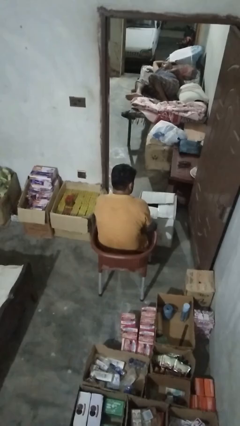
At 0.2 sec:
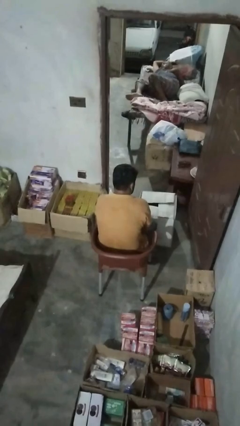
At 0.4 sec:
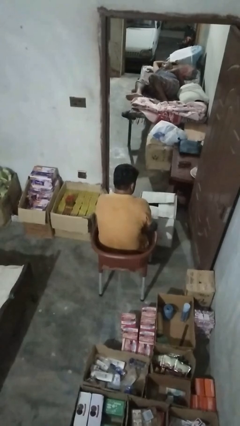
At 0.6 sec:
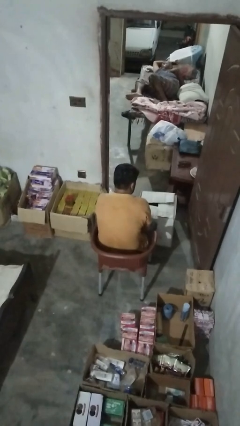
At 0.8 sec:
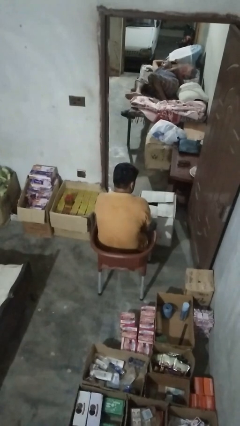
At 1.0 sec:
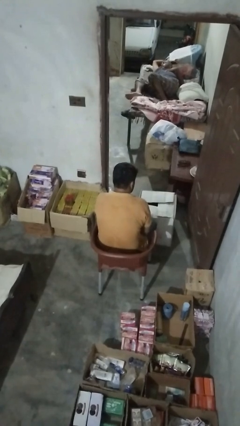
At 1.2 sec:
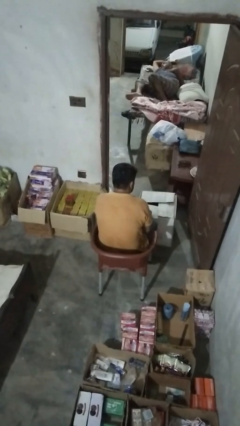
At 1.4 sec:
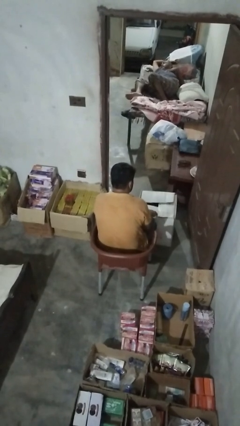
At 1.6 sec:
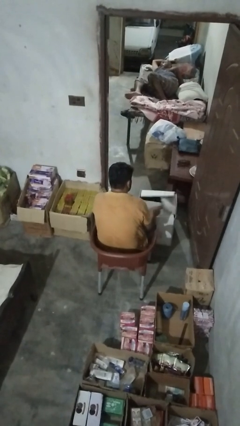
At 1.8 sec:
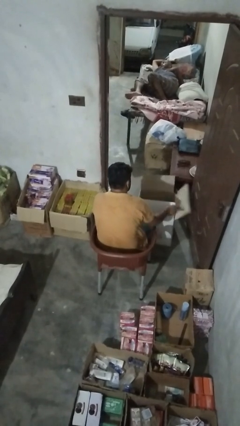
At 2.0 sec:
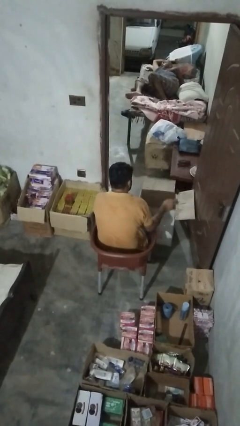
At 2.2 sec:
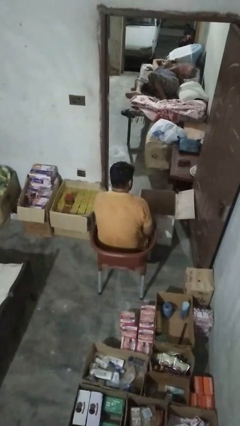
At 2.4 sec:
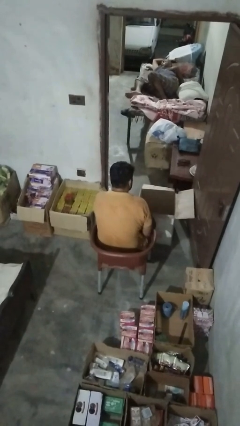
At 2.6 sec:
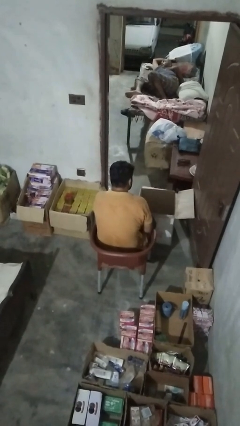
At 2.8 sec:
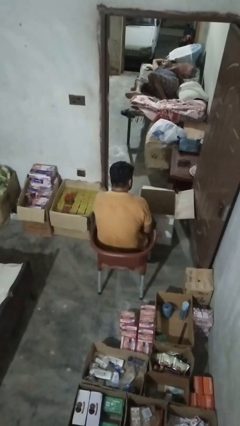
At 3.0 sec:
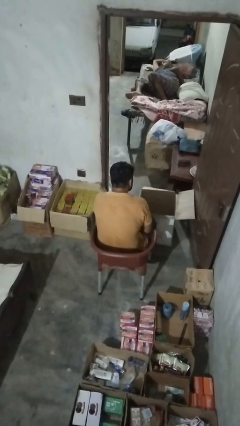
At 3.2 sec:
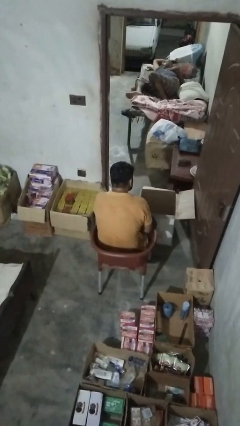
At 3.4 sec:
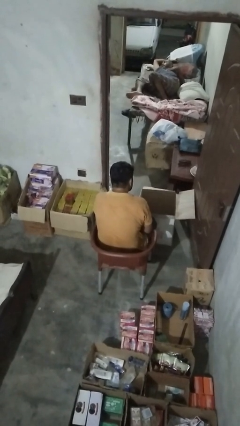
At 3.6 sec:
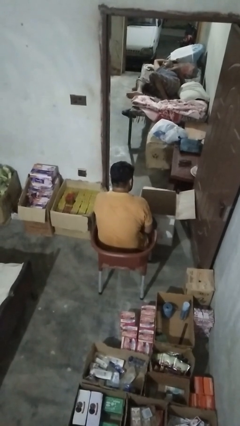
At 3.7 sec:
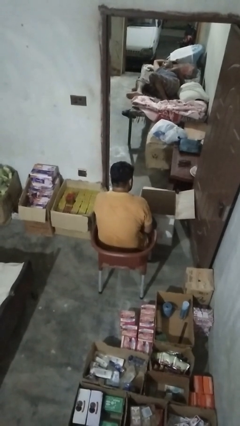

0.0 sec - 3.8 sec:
person closes box

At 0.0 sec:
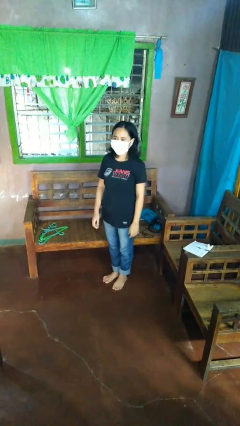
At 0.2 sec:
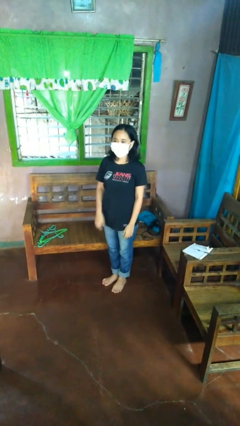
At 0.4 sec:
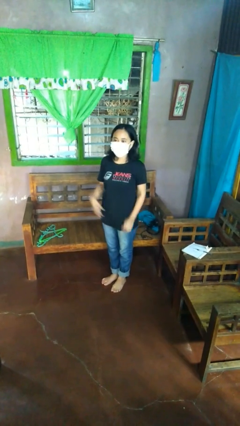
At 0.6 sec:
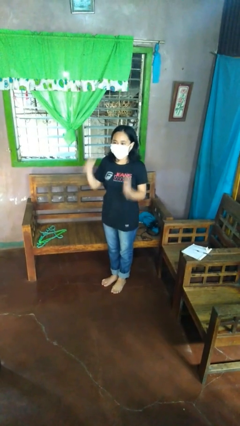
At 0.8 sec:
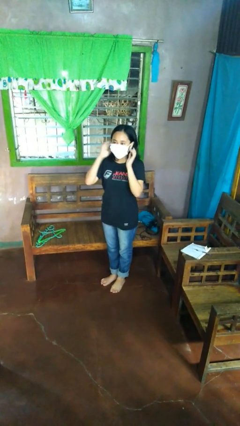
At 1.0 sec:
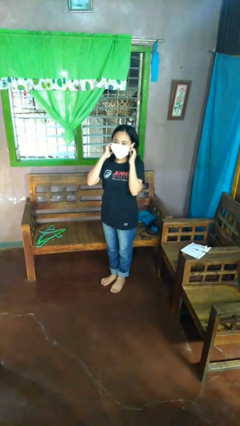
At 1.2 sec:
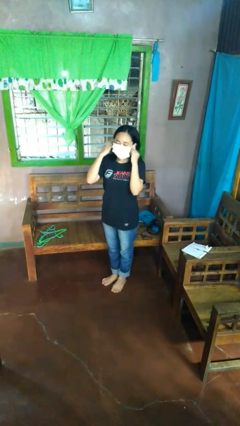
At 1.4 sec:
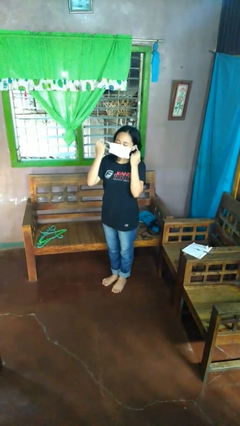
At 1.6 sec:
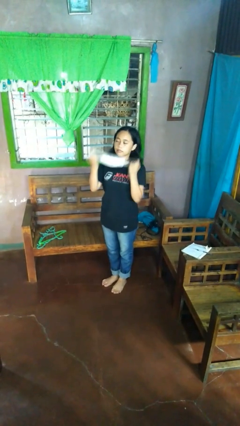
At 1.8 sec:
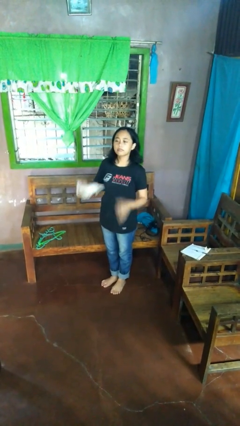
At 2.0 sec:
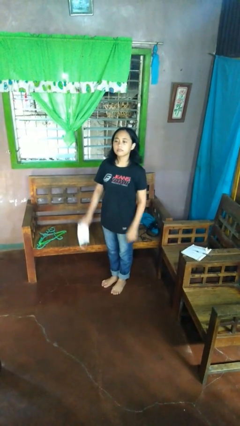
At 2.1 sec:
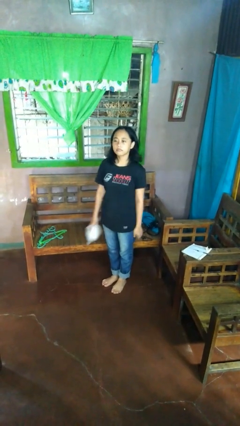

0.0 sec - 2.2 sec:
person takes off facemask

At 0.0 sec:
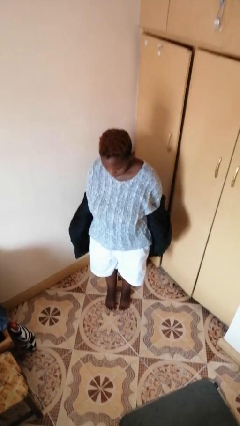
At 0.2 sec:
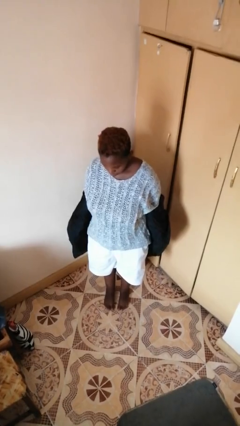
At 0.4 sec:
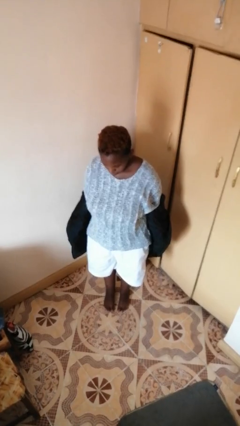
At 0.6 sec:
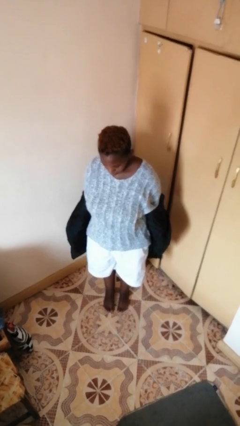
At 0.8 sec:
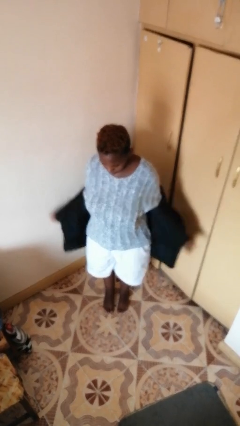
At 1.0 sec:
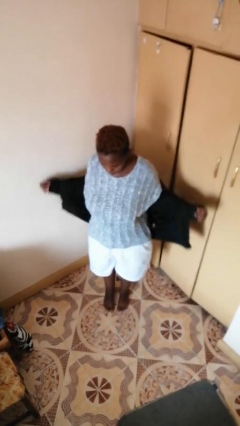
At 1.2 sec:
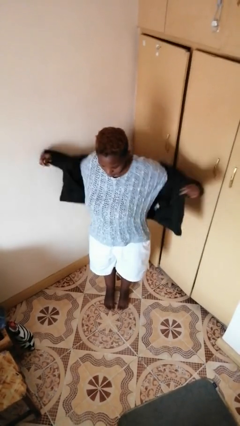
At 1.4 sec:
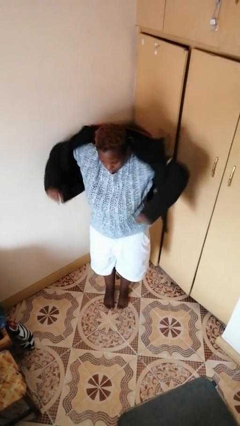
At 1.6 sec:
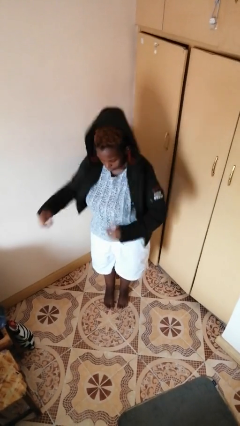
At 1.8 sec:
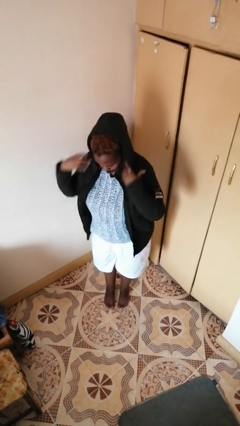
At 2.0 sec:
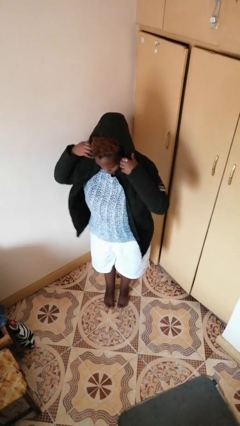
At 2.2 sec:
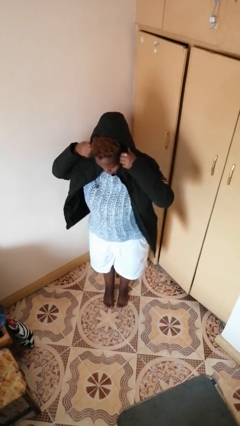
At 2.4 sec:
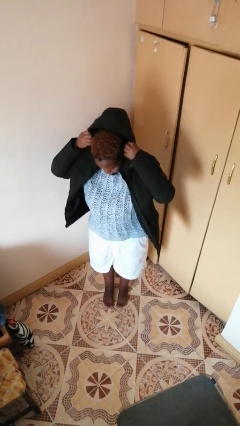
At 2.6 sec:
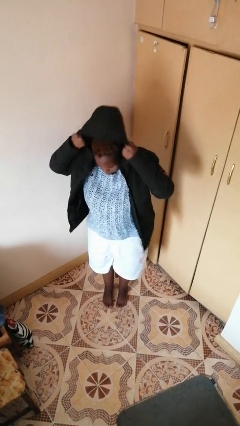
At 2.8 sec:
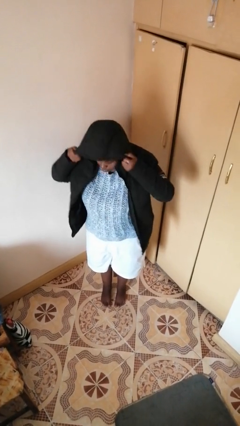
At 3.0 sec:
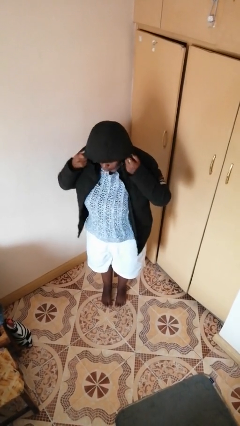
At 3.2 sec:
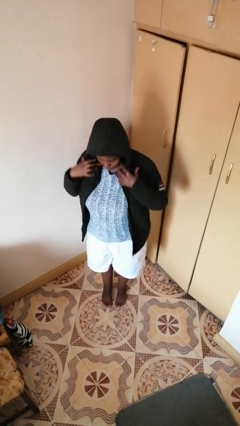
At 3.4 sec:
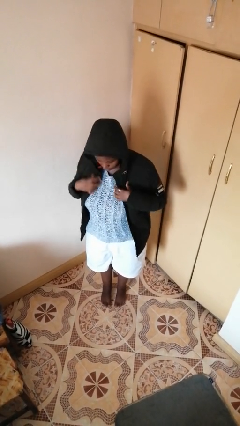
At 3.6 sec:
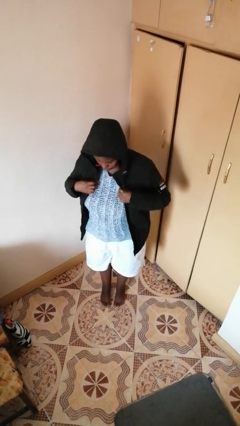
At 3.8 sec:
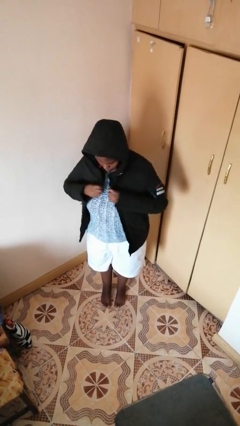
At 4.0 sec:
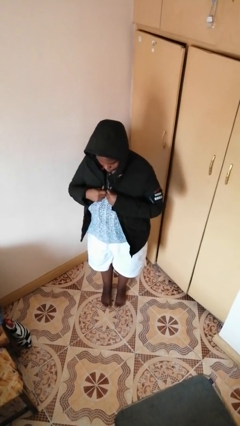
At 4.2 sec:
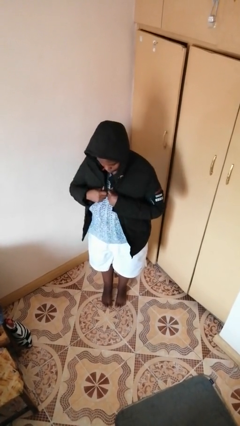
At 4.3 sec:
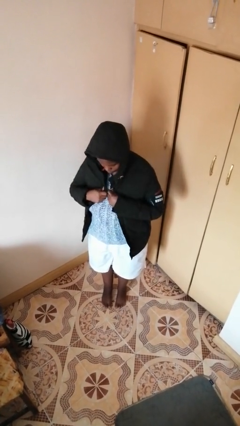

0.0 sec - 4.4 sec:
person puts on hoodie

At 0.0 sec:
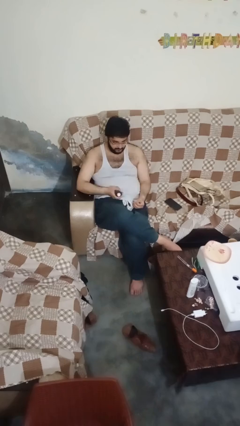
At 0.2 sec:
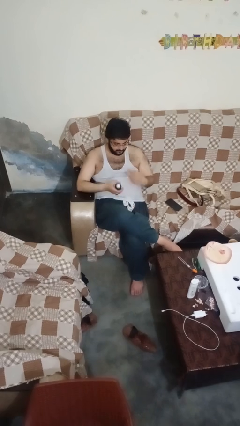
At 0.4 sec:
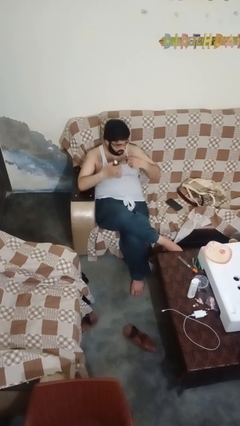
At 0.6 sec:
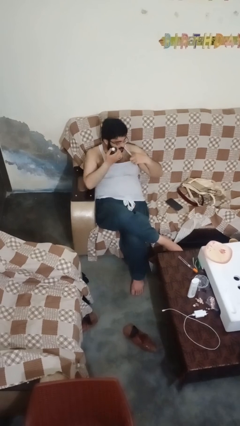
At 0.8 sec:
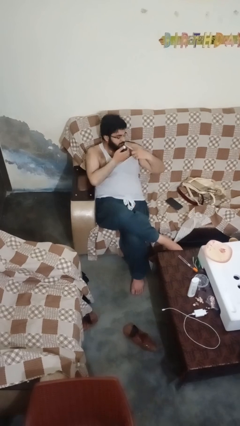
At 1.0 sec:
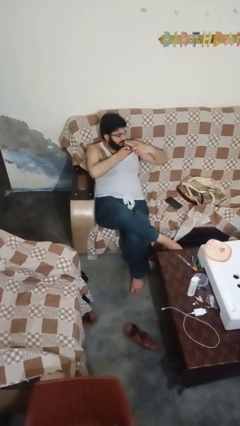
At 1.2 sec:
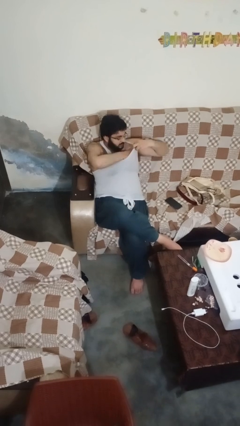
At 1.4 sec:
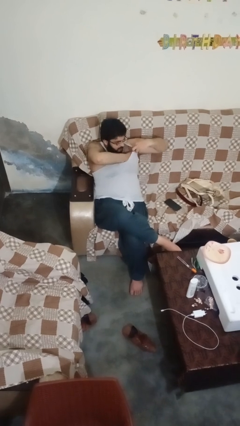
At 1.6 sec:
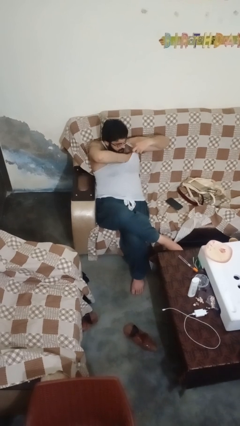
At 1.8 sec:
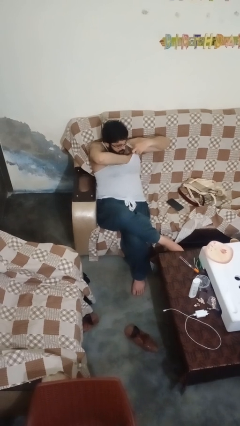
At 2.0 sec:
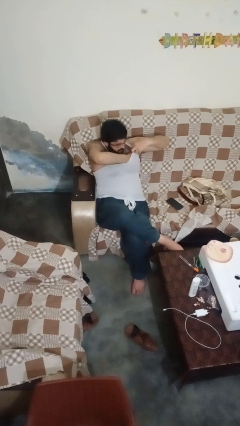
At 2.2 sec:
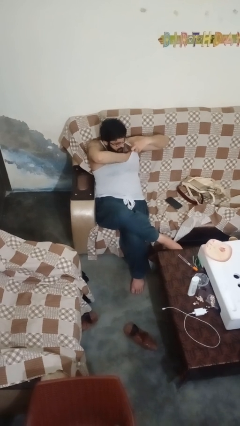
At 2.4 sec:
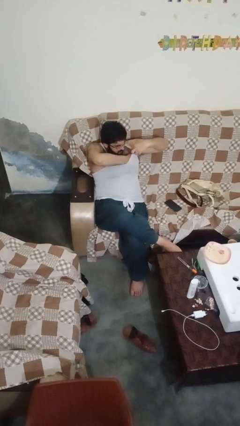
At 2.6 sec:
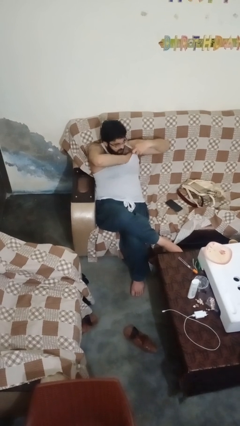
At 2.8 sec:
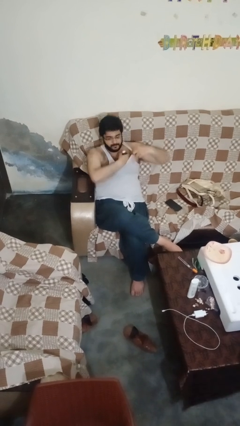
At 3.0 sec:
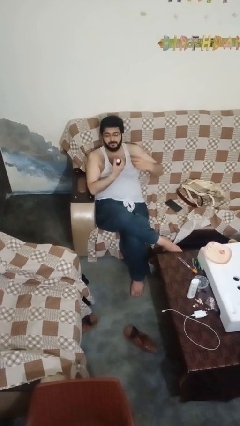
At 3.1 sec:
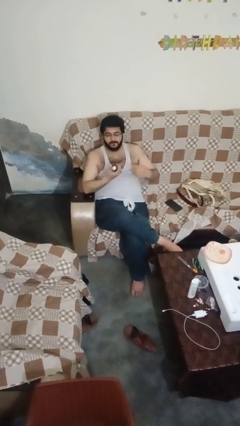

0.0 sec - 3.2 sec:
person applies deodorant

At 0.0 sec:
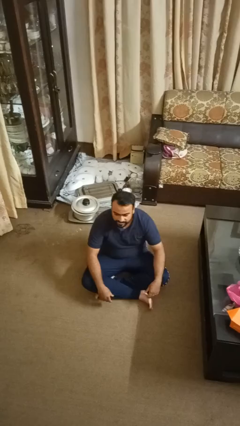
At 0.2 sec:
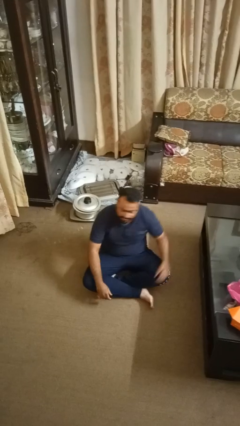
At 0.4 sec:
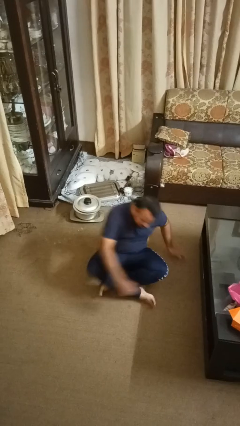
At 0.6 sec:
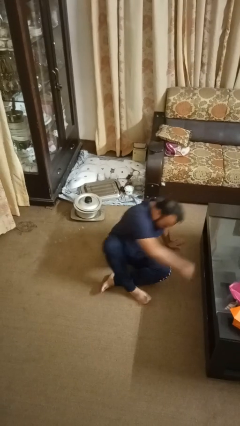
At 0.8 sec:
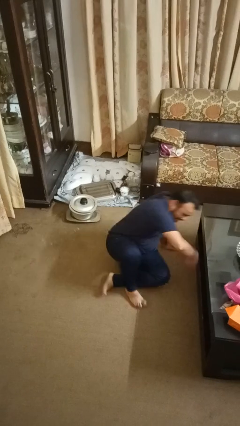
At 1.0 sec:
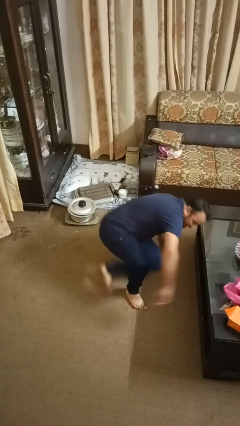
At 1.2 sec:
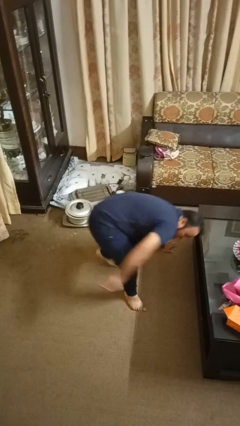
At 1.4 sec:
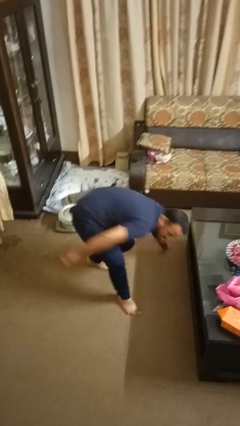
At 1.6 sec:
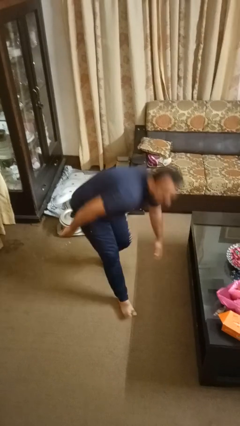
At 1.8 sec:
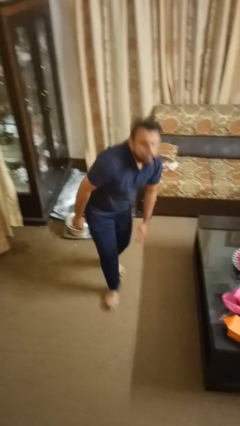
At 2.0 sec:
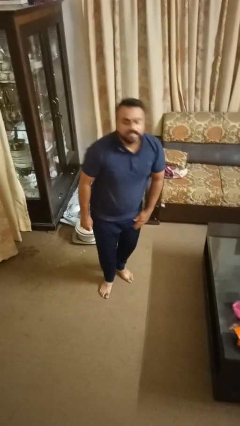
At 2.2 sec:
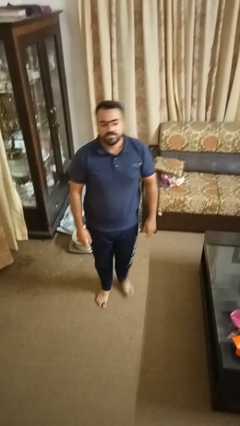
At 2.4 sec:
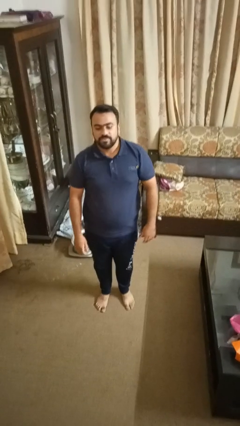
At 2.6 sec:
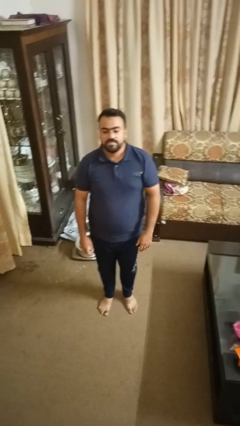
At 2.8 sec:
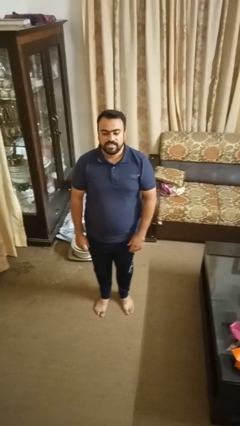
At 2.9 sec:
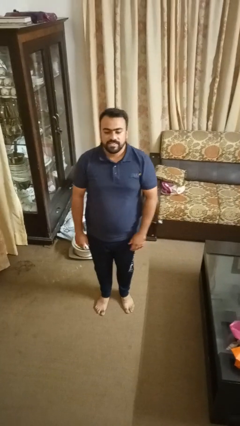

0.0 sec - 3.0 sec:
person stands up from floor

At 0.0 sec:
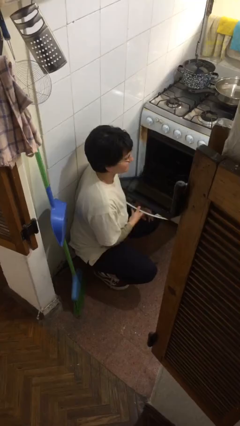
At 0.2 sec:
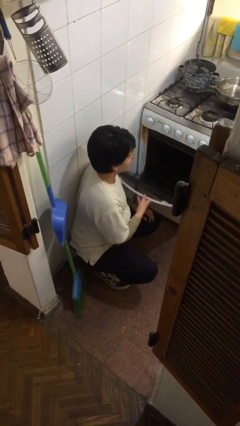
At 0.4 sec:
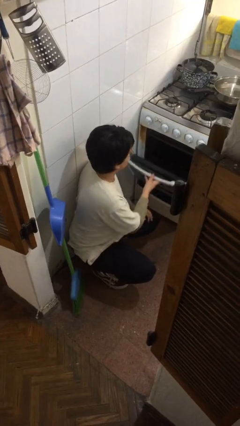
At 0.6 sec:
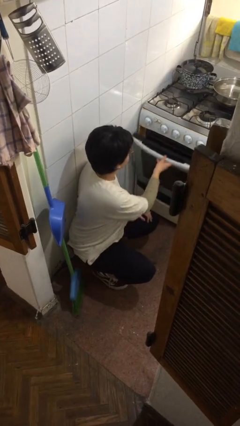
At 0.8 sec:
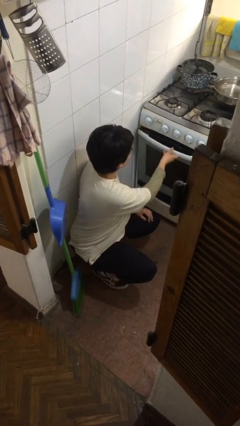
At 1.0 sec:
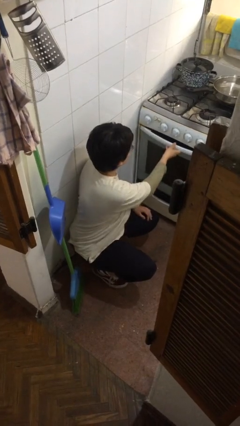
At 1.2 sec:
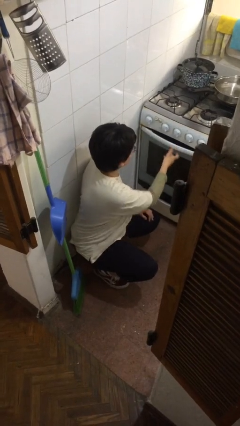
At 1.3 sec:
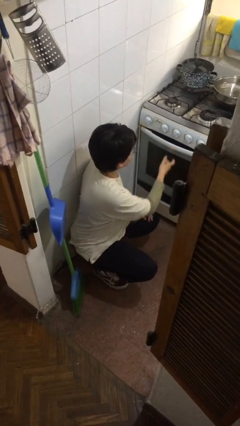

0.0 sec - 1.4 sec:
person closes oven door
